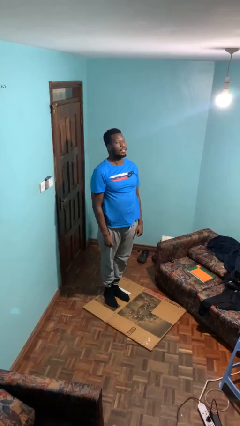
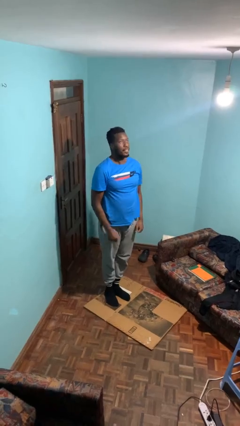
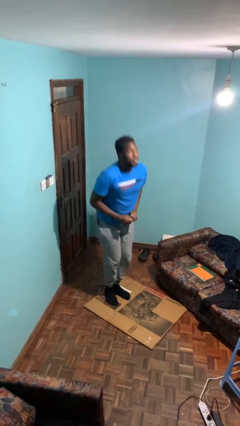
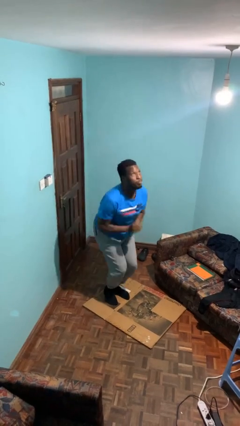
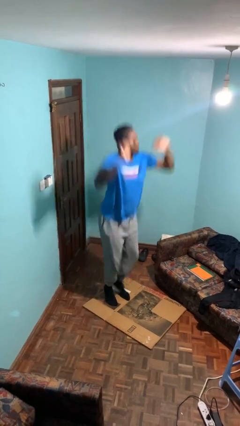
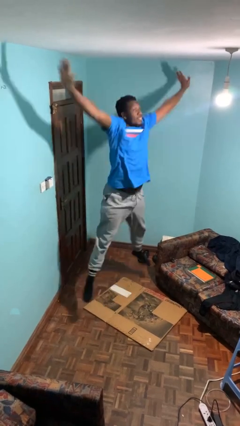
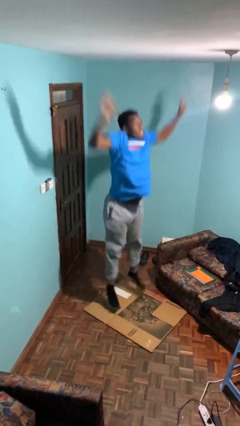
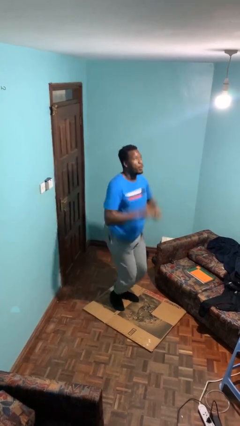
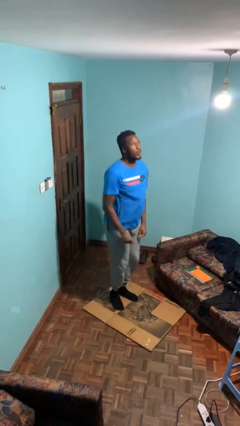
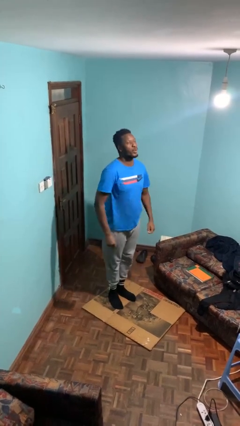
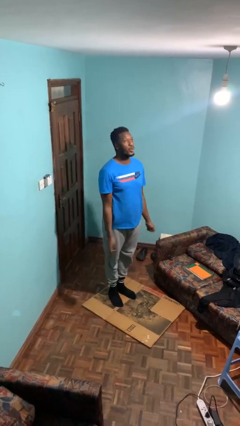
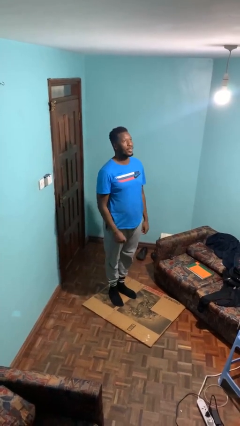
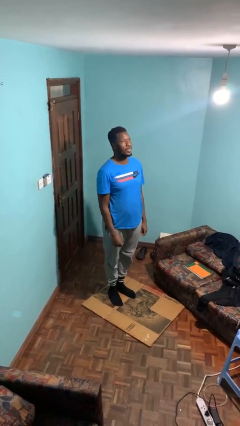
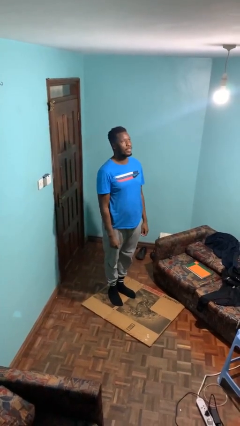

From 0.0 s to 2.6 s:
person exercises with jumping jacks

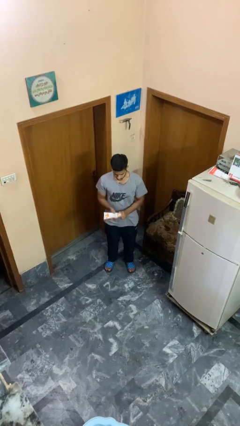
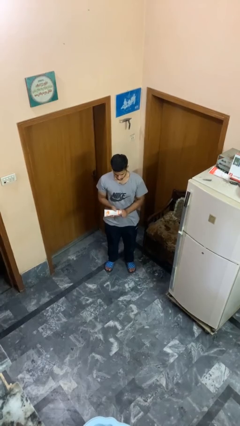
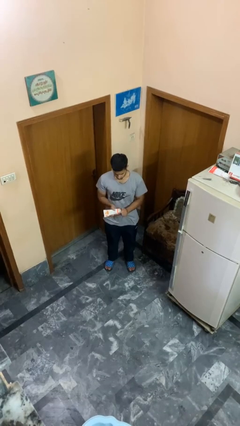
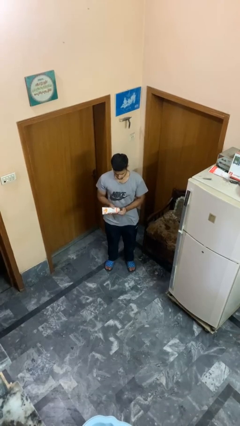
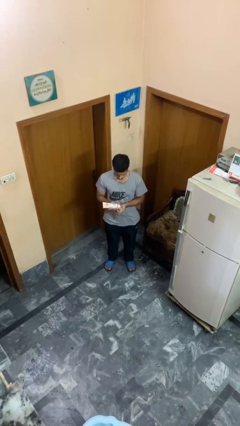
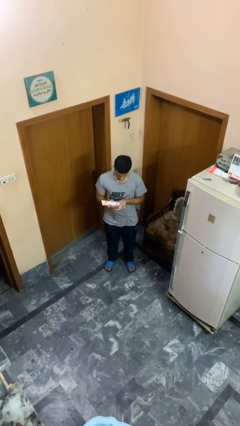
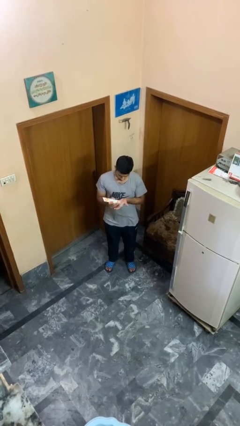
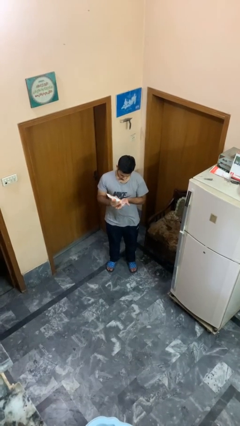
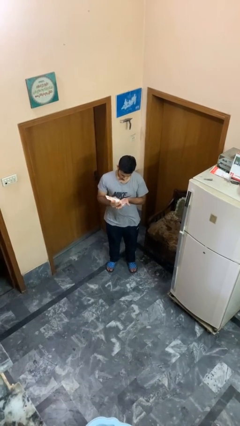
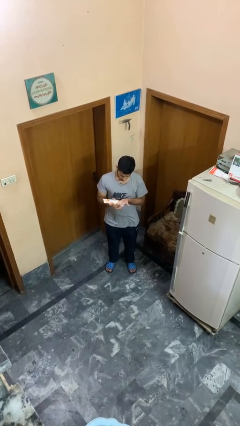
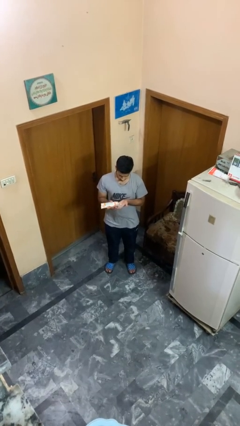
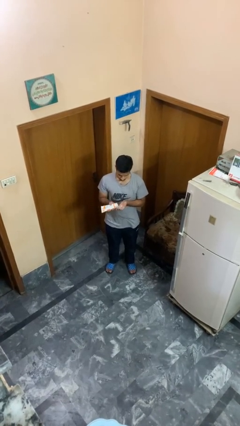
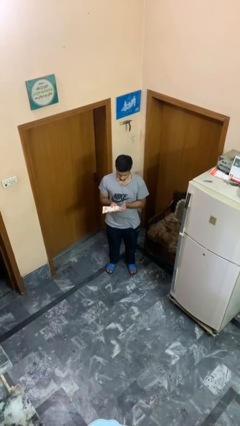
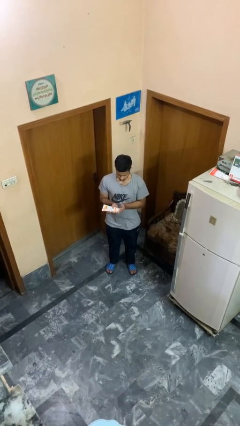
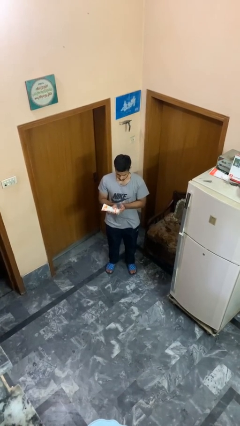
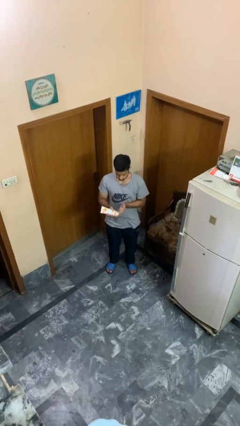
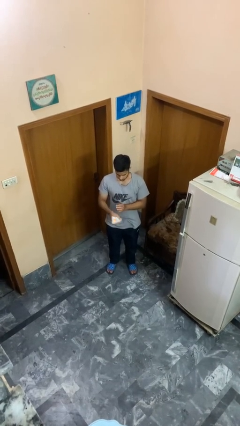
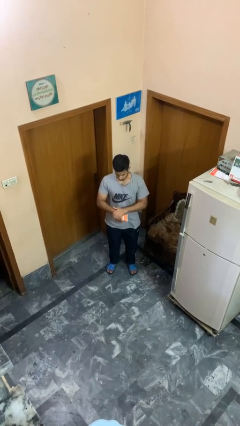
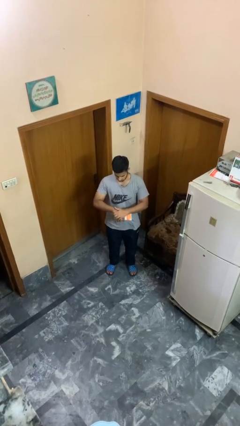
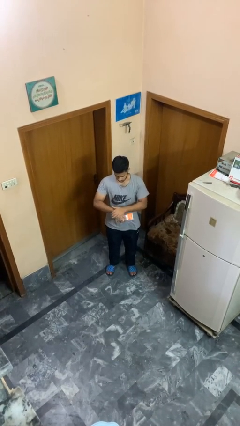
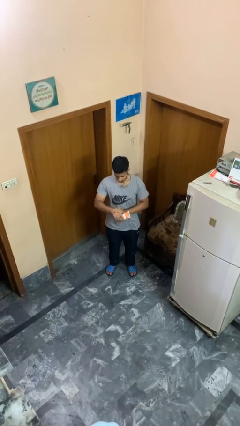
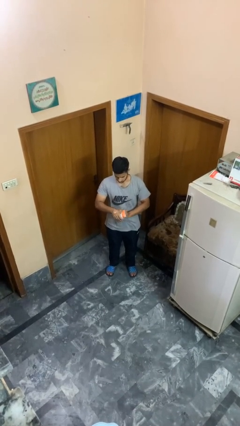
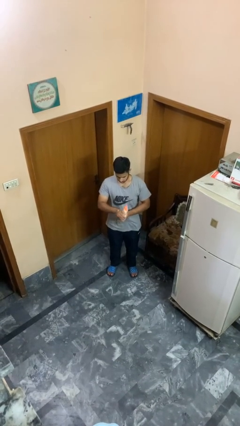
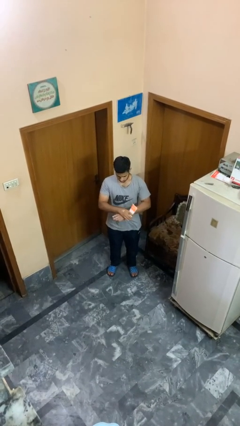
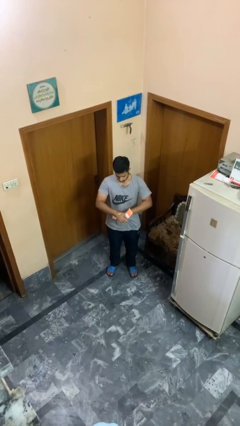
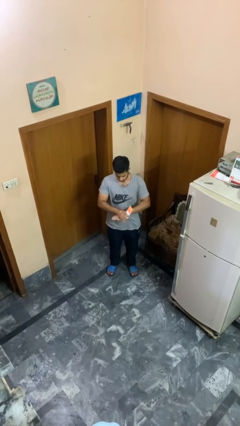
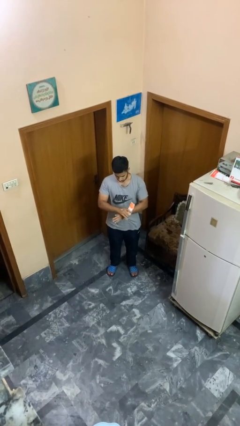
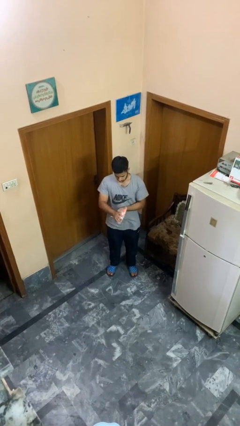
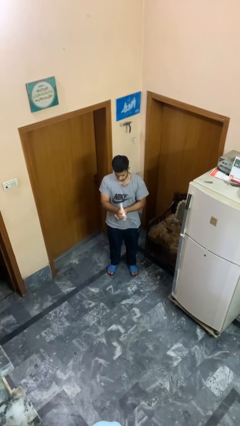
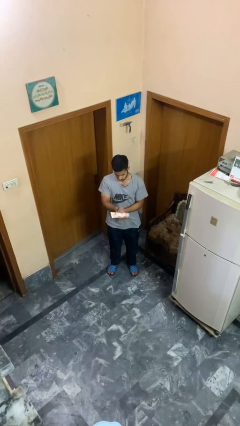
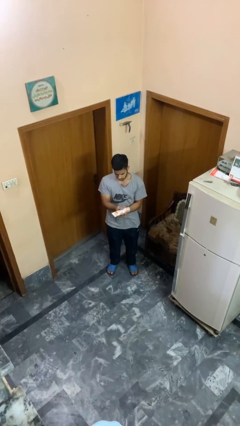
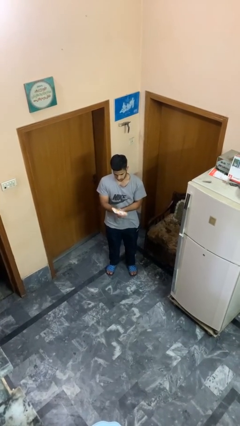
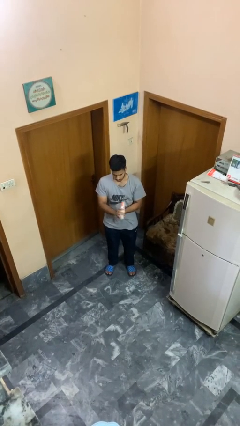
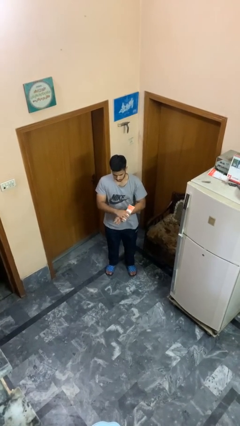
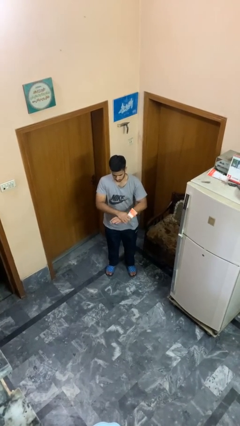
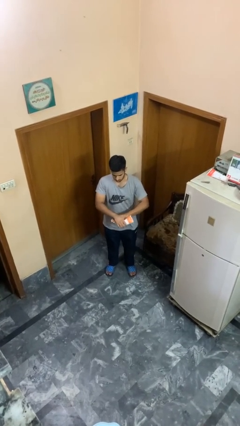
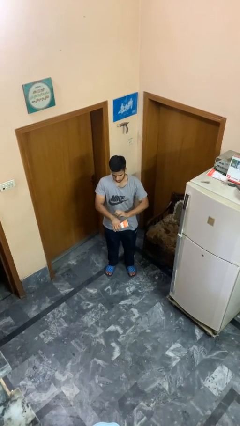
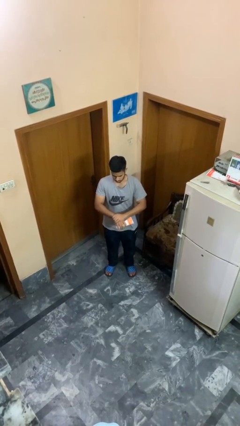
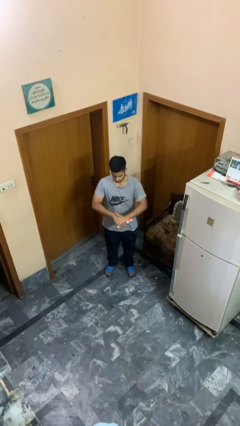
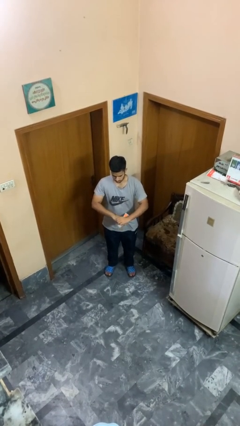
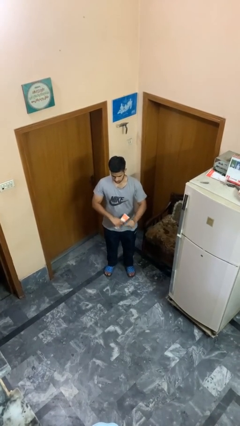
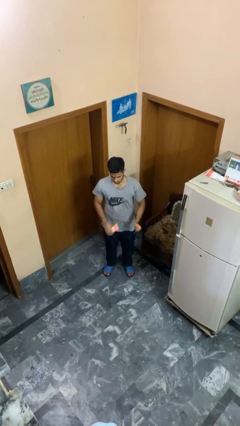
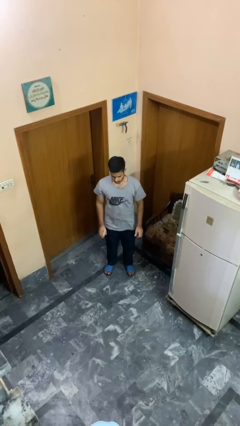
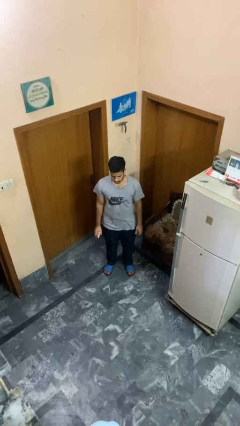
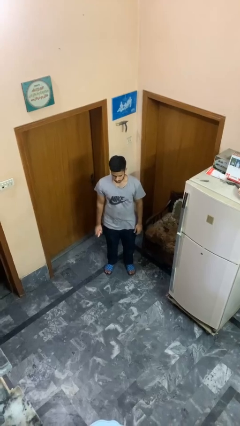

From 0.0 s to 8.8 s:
person applies sunscreen

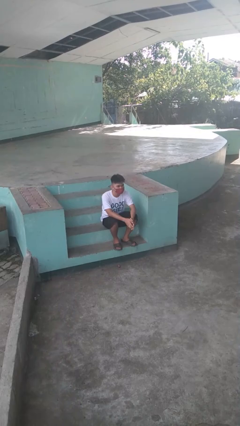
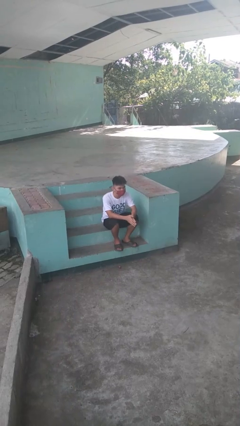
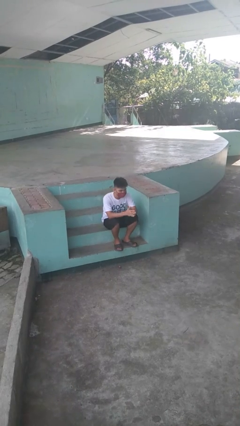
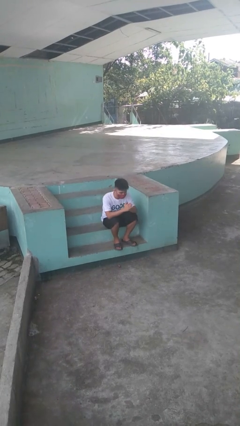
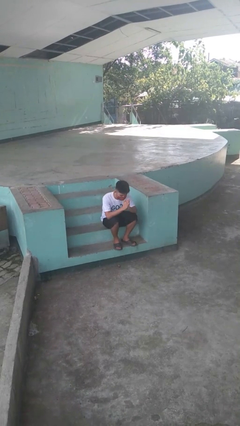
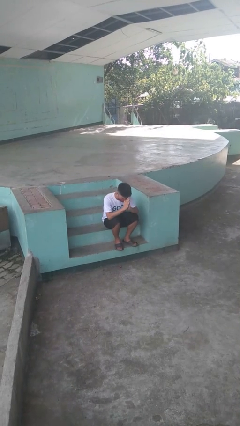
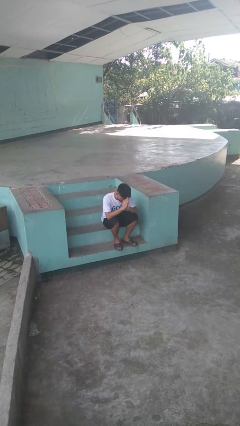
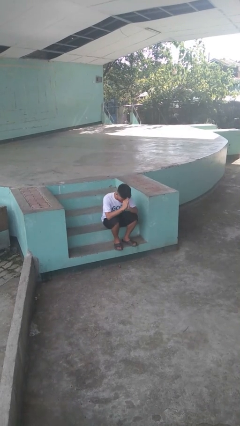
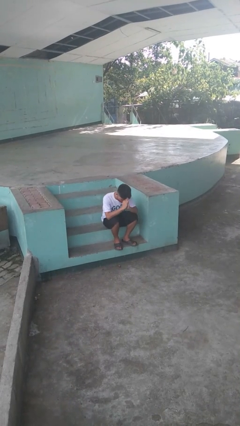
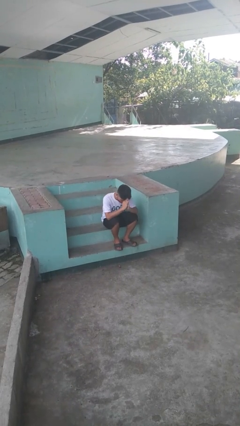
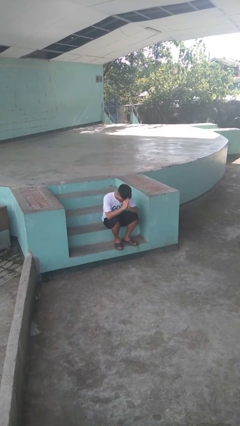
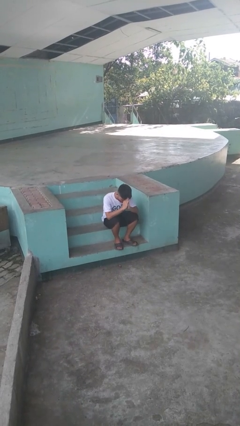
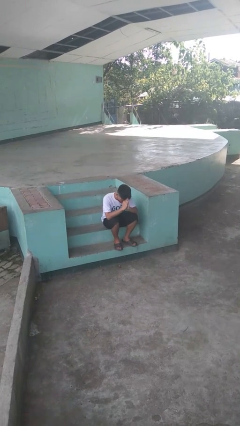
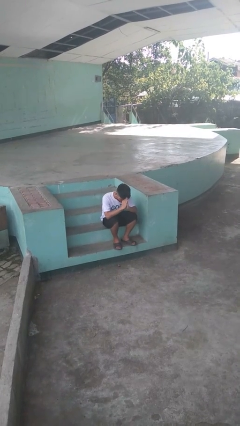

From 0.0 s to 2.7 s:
person prays

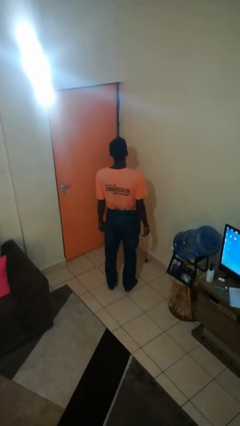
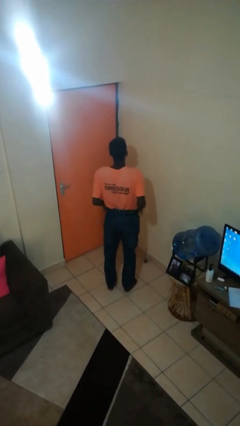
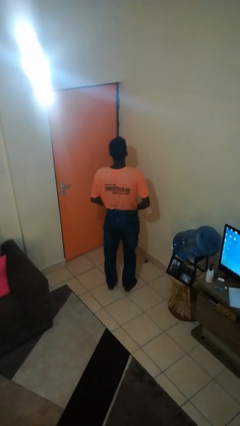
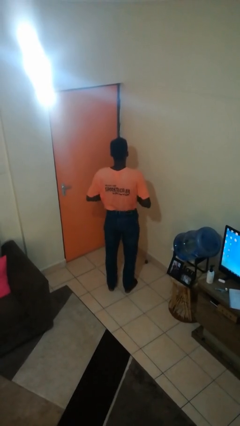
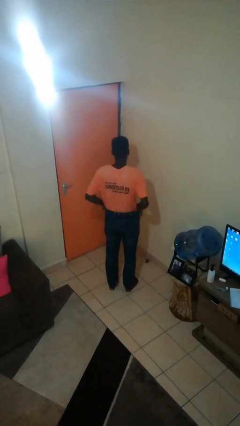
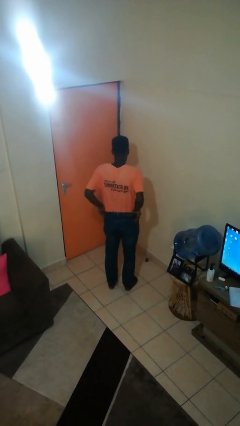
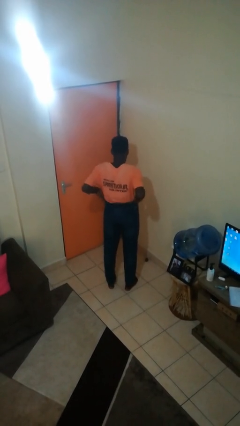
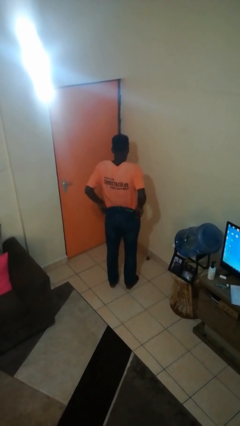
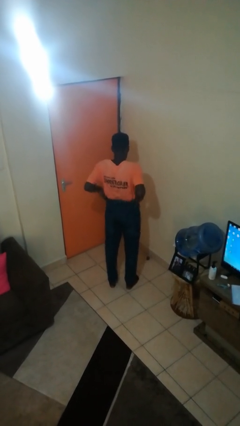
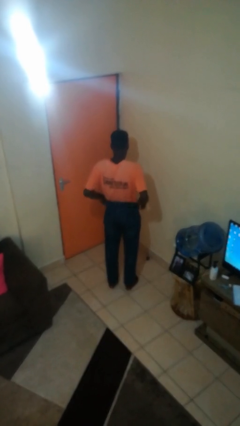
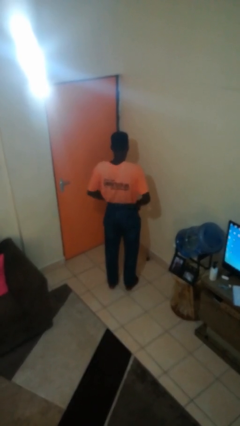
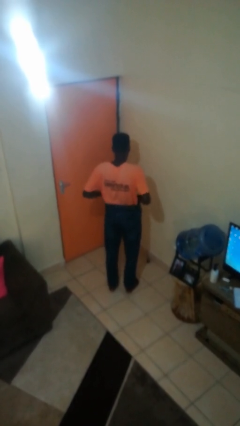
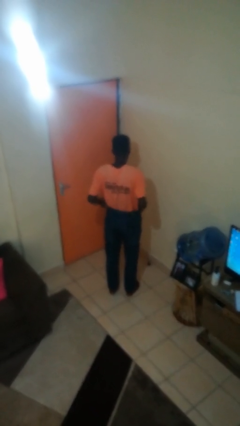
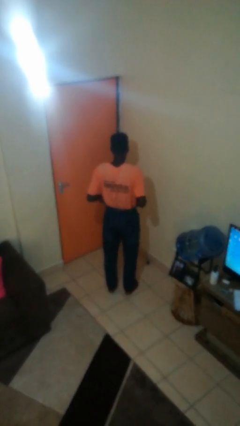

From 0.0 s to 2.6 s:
person hikes up pants

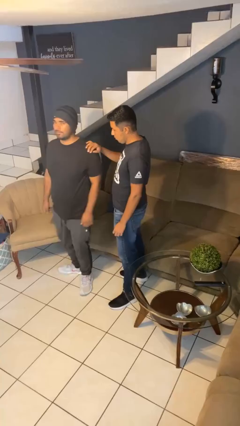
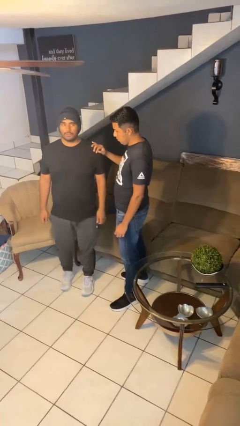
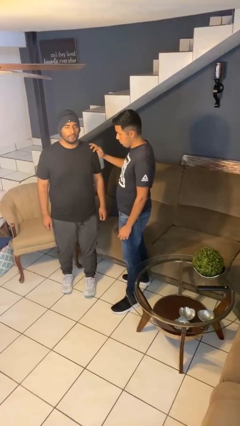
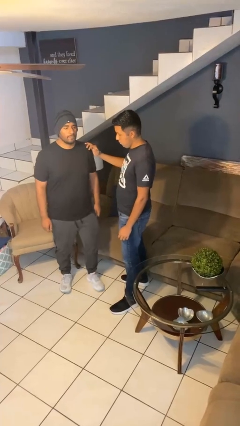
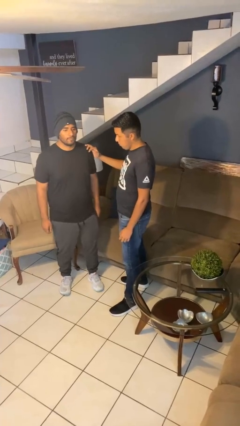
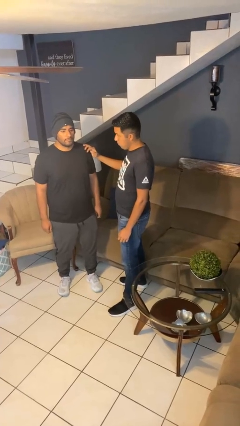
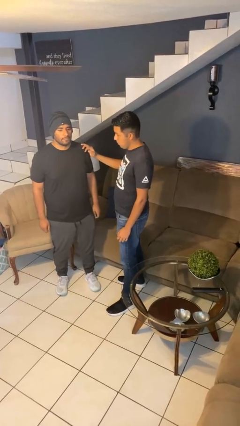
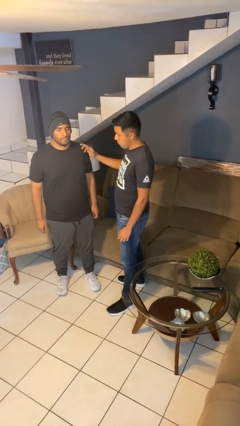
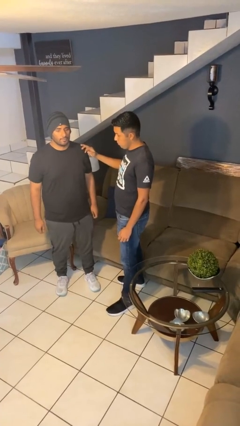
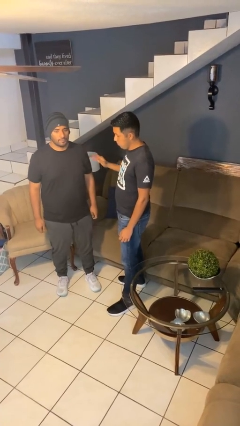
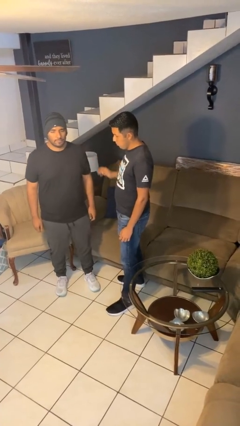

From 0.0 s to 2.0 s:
person spins person around
